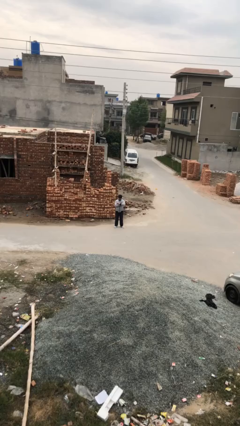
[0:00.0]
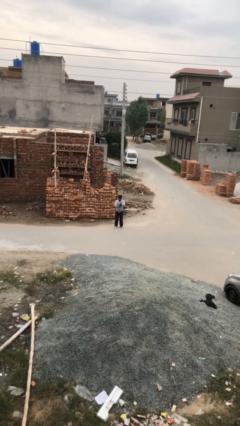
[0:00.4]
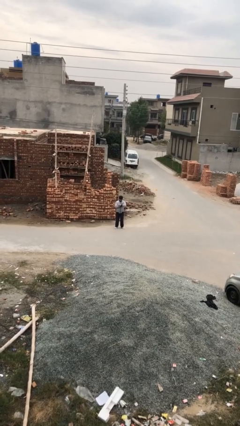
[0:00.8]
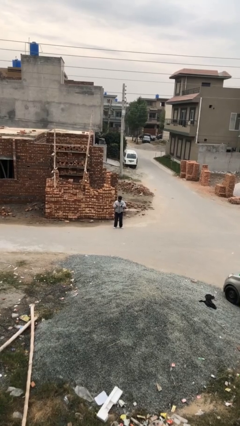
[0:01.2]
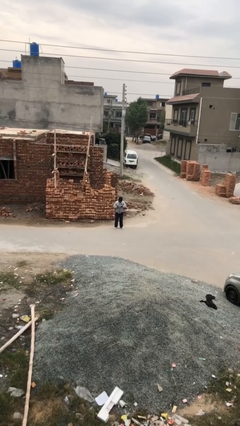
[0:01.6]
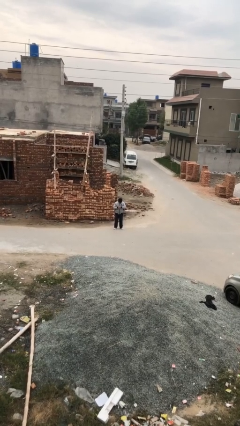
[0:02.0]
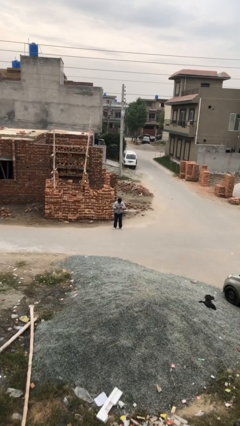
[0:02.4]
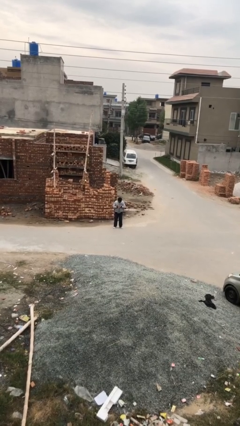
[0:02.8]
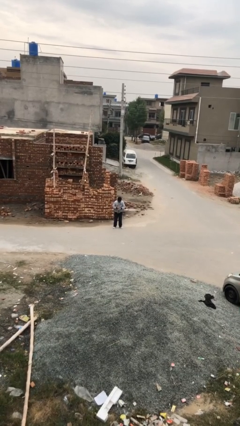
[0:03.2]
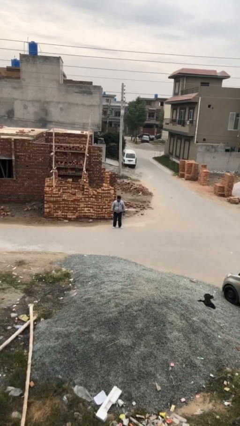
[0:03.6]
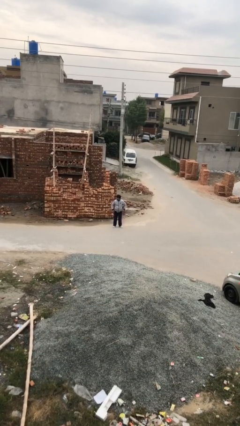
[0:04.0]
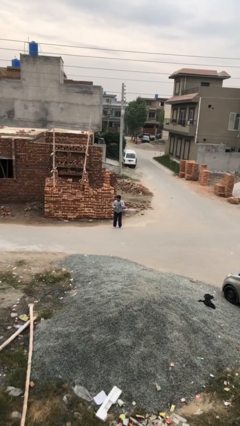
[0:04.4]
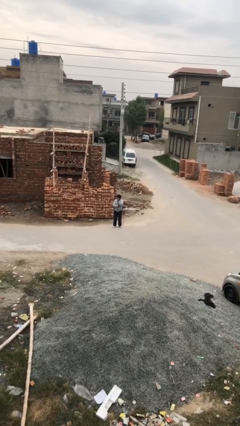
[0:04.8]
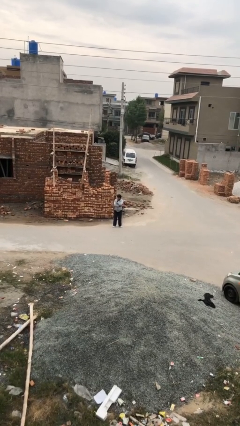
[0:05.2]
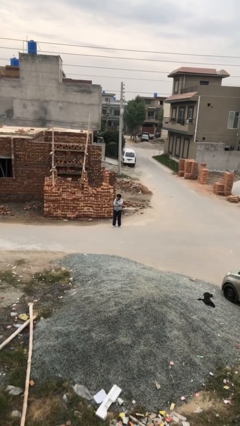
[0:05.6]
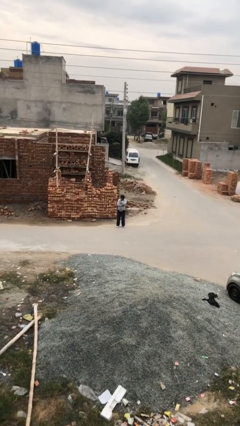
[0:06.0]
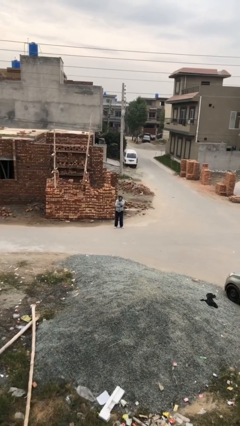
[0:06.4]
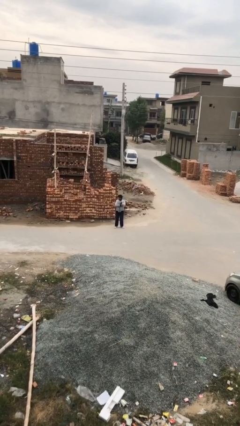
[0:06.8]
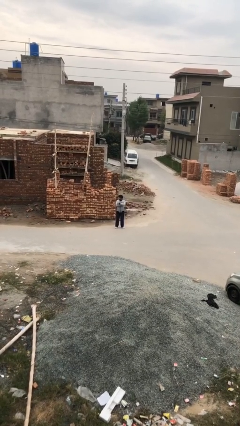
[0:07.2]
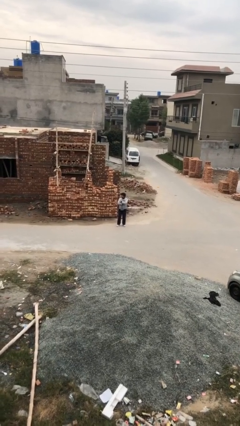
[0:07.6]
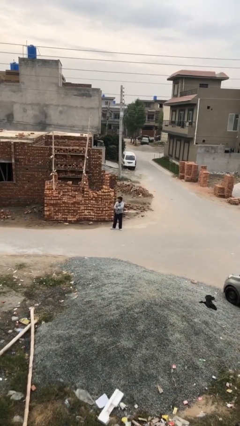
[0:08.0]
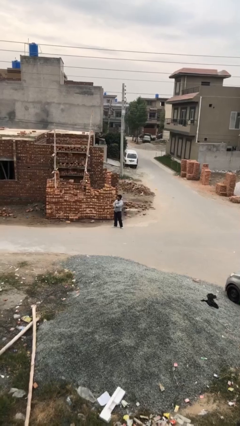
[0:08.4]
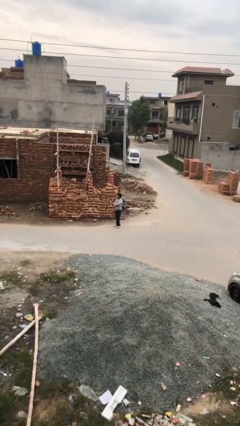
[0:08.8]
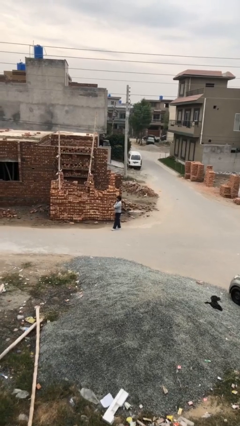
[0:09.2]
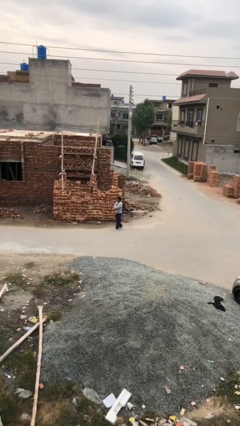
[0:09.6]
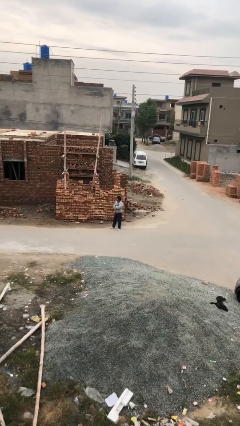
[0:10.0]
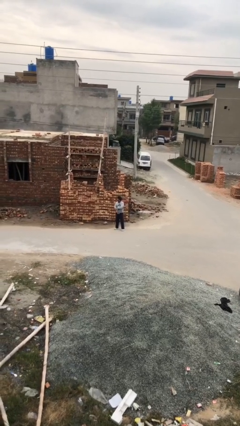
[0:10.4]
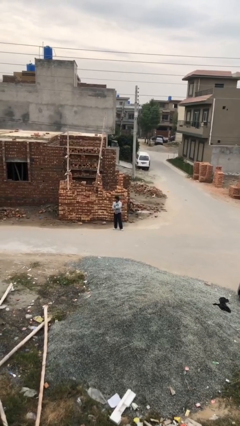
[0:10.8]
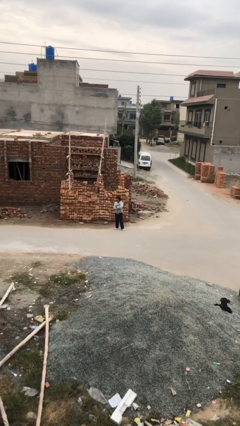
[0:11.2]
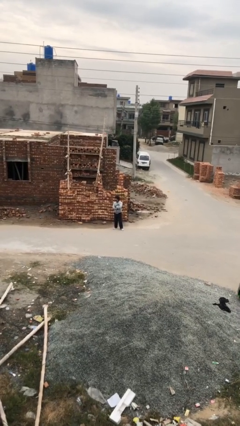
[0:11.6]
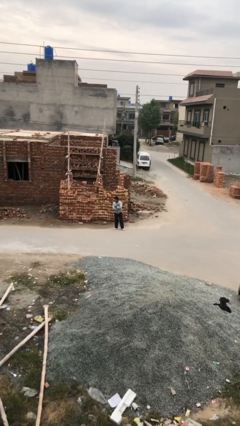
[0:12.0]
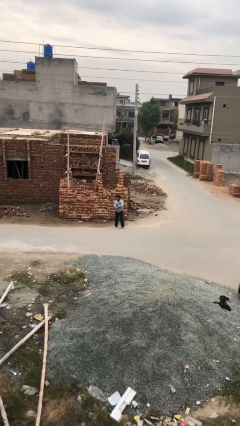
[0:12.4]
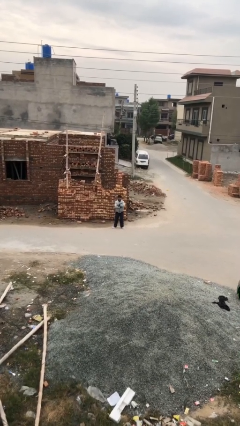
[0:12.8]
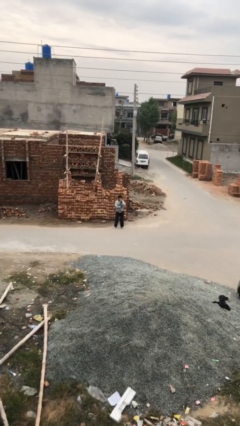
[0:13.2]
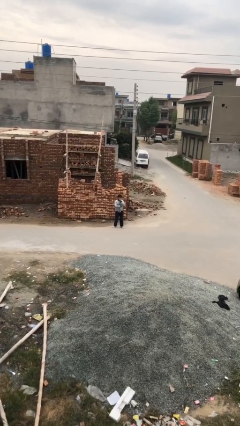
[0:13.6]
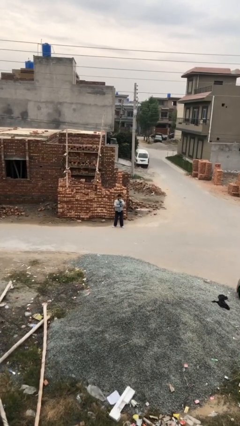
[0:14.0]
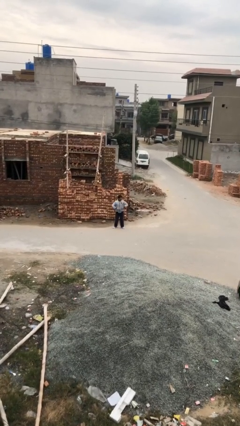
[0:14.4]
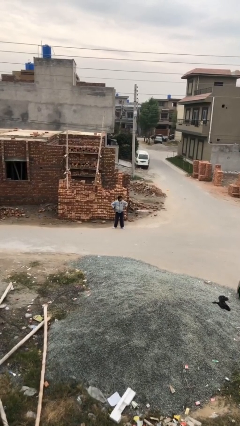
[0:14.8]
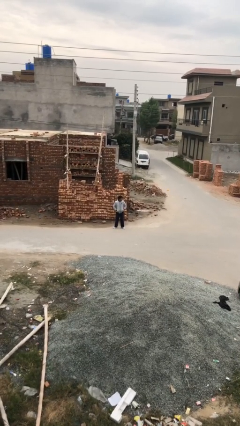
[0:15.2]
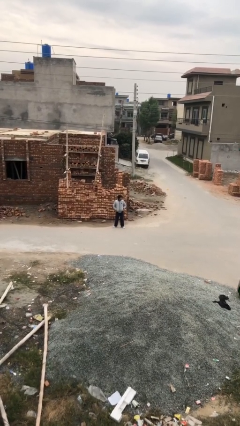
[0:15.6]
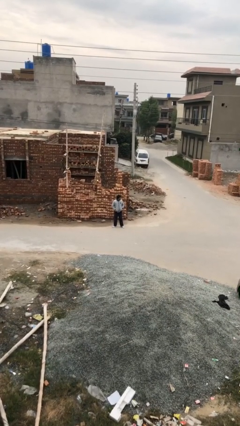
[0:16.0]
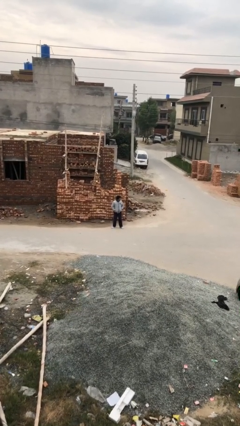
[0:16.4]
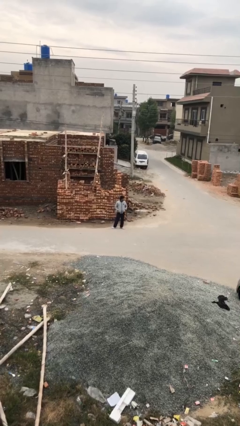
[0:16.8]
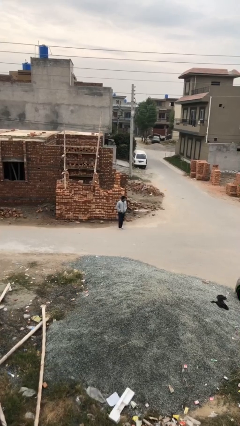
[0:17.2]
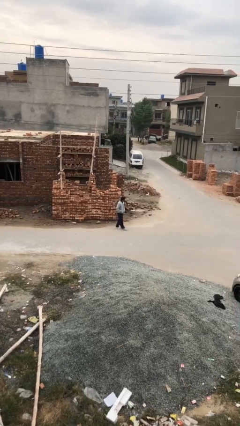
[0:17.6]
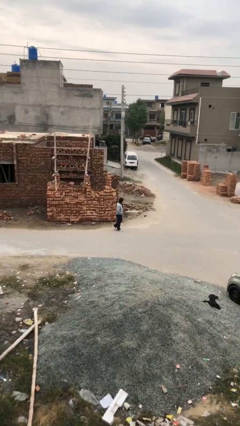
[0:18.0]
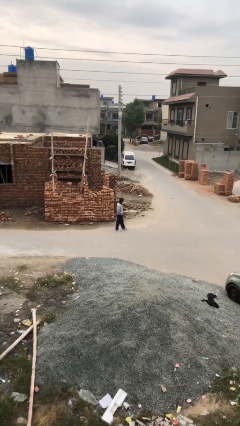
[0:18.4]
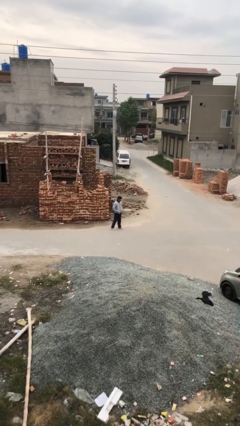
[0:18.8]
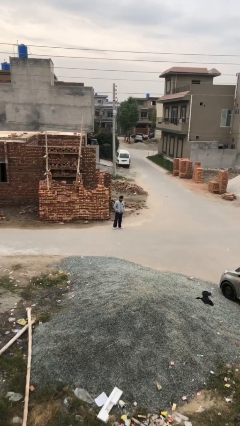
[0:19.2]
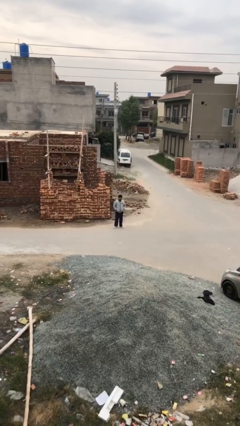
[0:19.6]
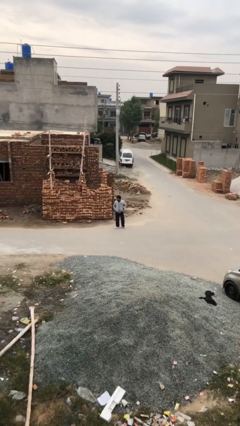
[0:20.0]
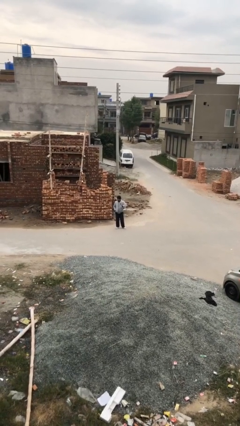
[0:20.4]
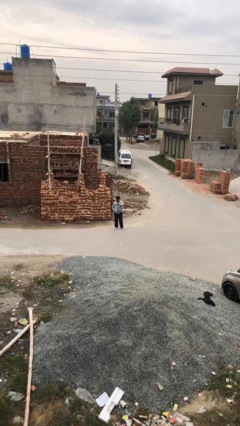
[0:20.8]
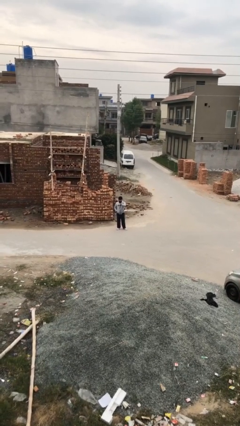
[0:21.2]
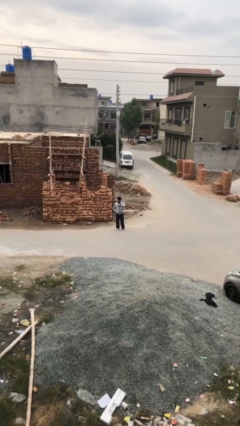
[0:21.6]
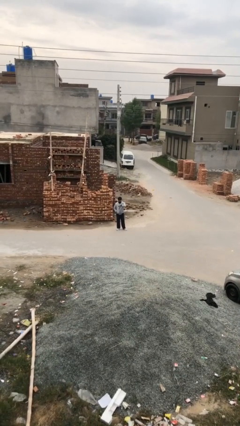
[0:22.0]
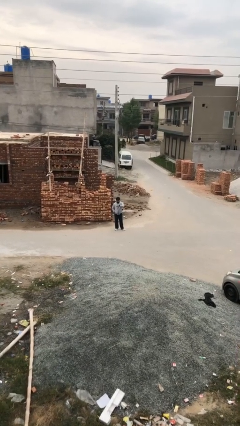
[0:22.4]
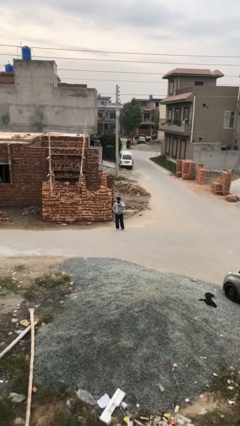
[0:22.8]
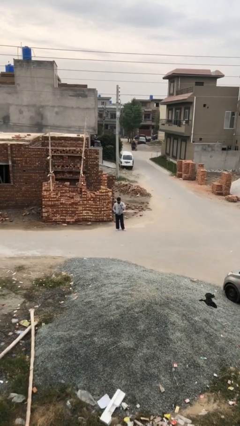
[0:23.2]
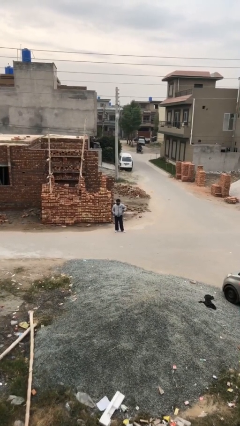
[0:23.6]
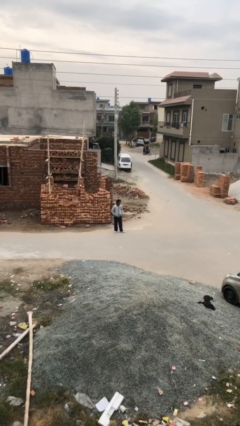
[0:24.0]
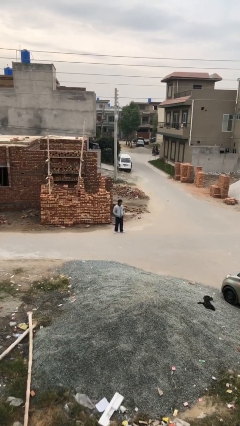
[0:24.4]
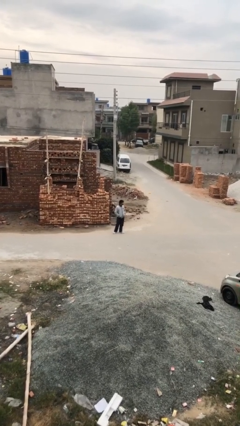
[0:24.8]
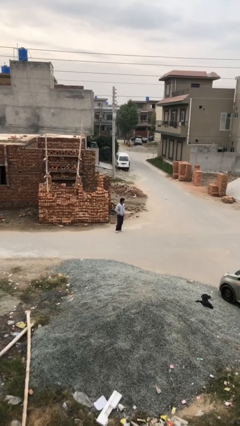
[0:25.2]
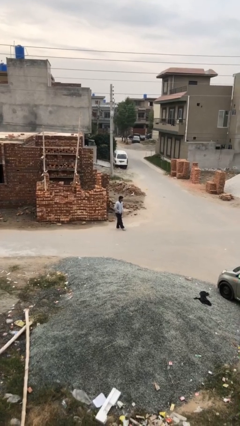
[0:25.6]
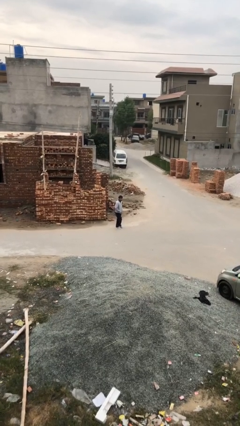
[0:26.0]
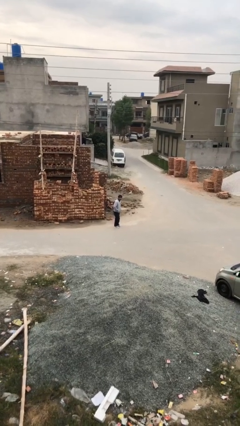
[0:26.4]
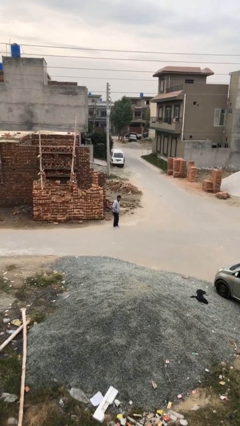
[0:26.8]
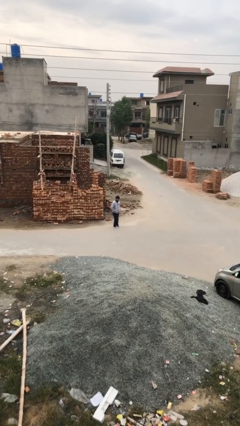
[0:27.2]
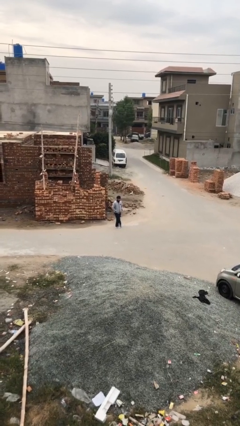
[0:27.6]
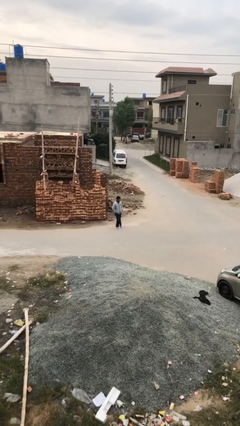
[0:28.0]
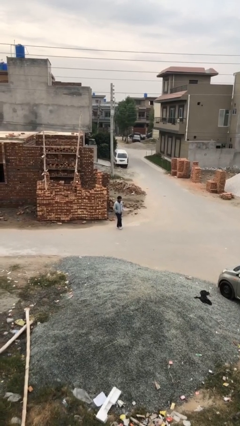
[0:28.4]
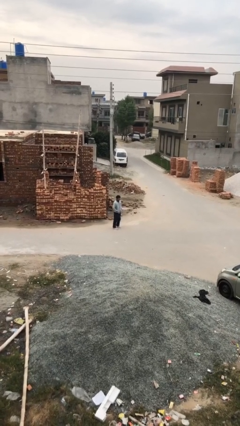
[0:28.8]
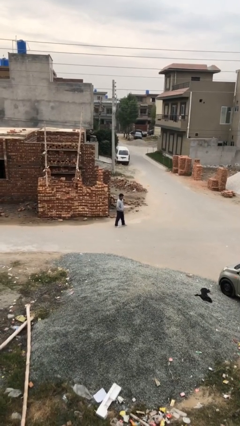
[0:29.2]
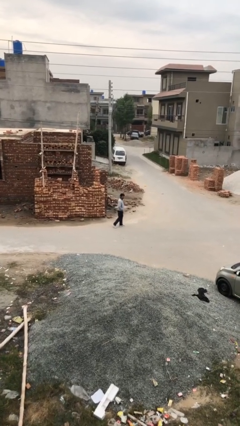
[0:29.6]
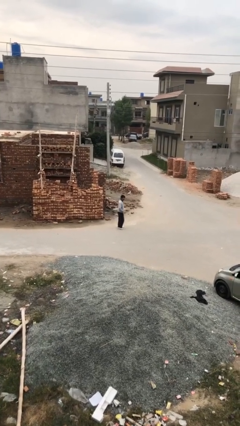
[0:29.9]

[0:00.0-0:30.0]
person walks

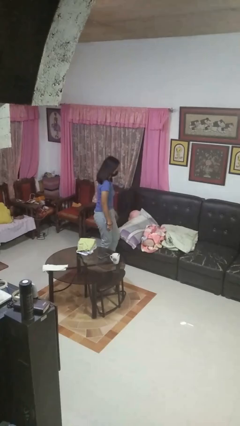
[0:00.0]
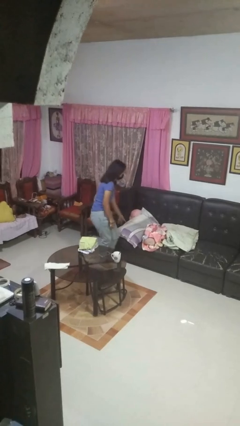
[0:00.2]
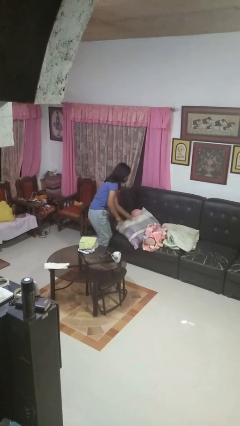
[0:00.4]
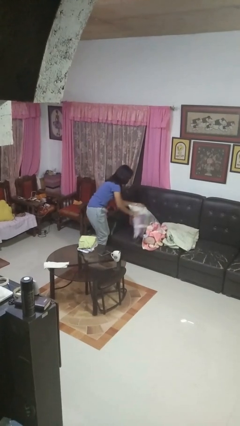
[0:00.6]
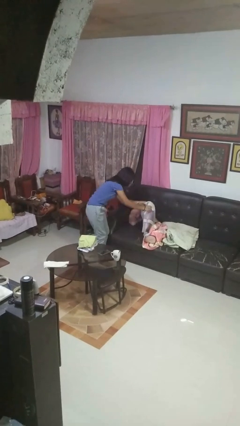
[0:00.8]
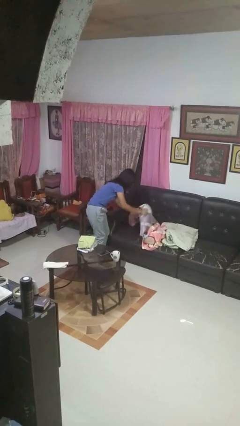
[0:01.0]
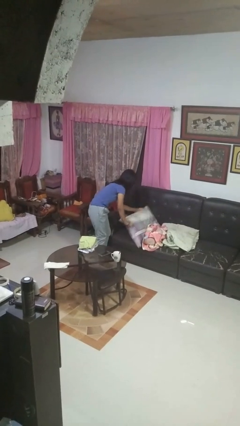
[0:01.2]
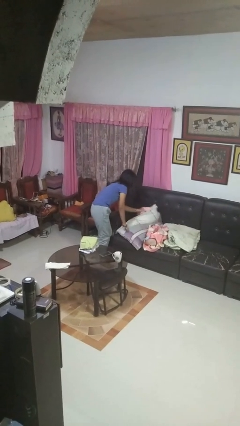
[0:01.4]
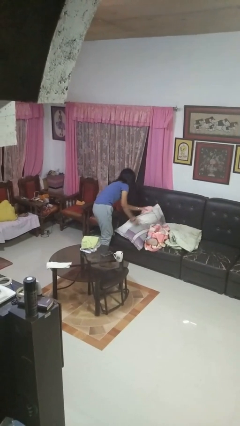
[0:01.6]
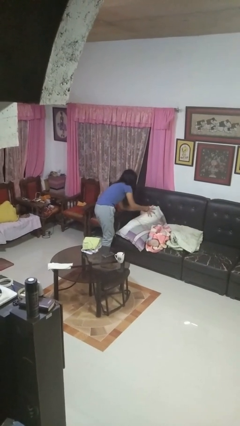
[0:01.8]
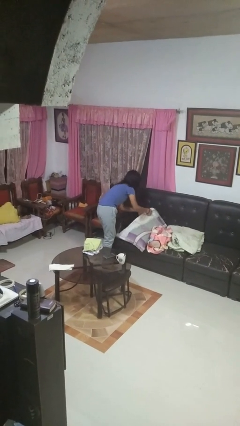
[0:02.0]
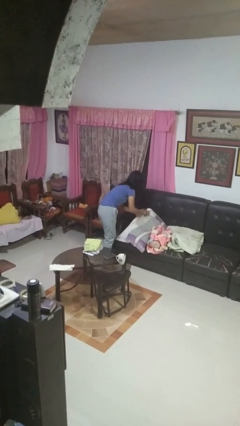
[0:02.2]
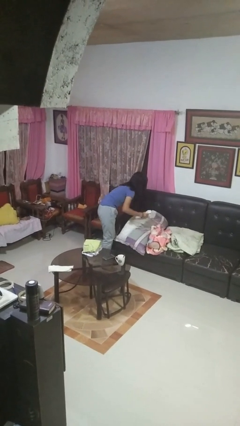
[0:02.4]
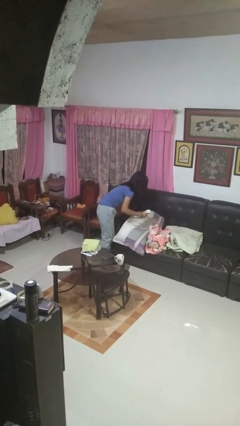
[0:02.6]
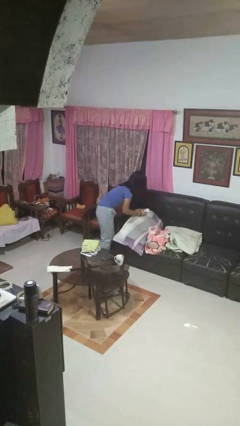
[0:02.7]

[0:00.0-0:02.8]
person searches in couch

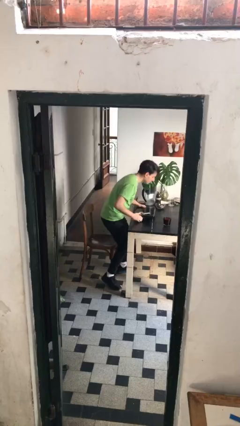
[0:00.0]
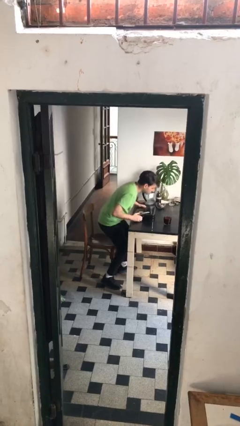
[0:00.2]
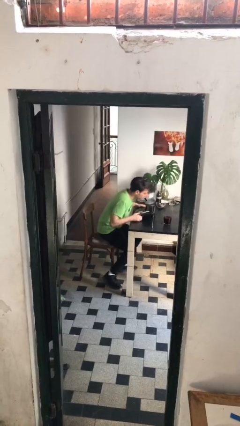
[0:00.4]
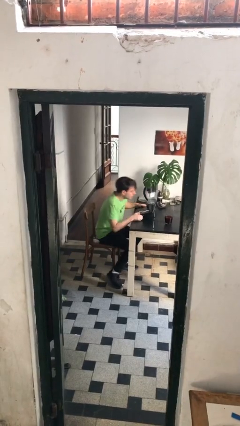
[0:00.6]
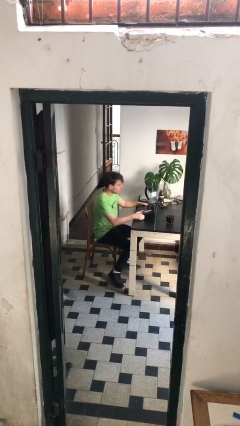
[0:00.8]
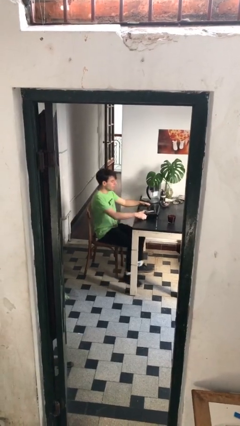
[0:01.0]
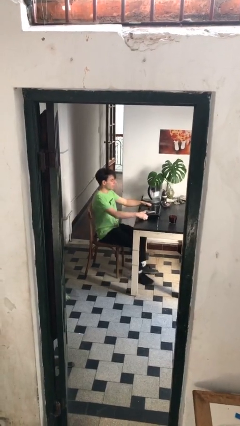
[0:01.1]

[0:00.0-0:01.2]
person sits down
